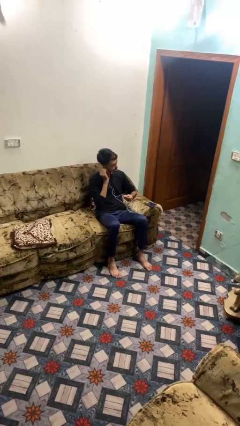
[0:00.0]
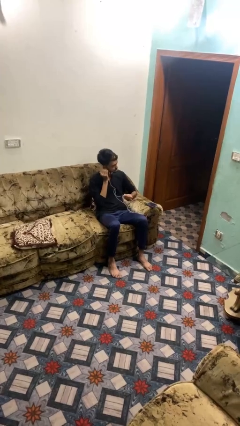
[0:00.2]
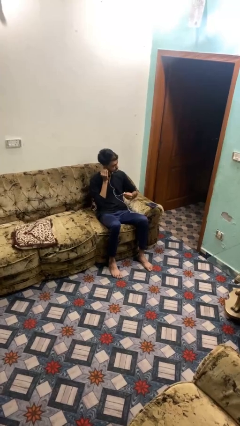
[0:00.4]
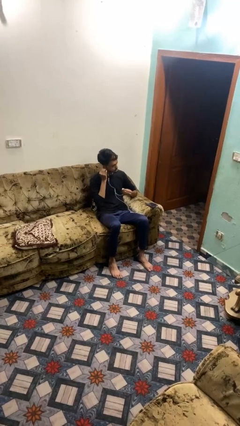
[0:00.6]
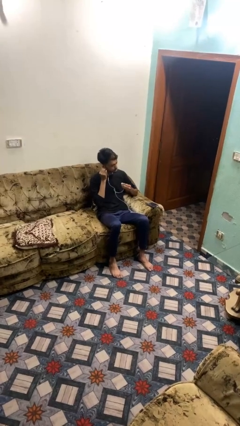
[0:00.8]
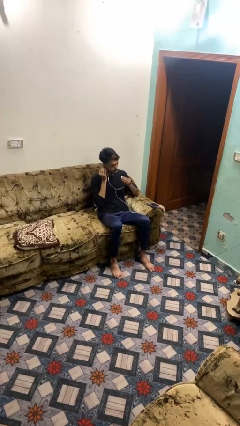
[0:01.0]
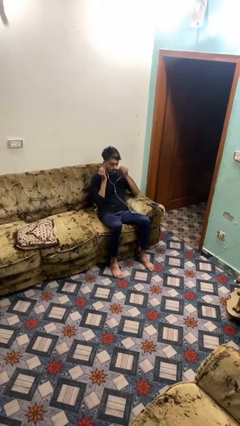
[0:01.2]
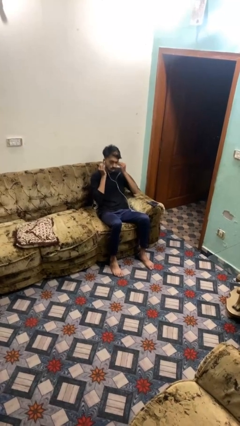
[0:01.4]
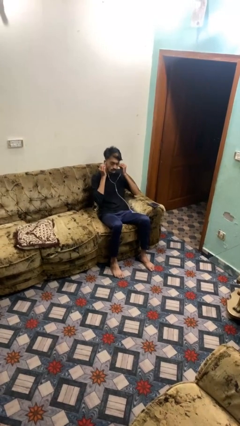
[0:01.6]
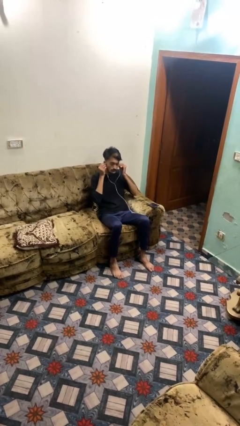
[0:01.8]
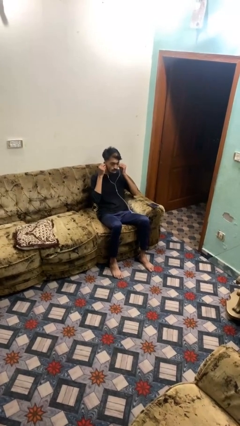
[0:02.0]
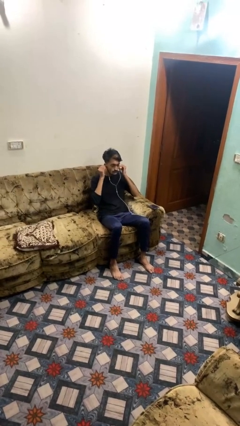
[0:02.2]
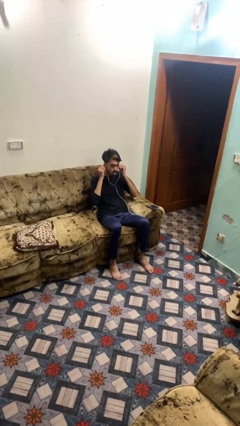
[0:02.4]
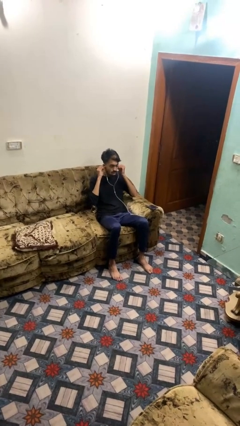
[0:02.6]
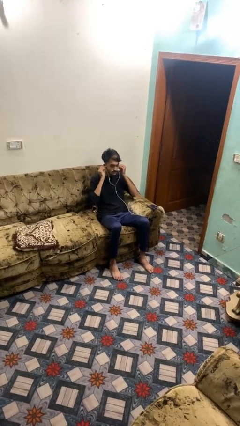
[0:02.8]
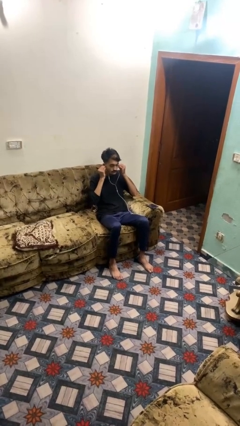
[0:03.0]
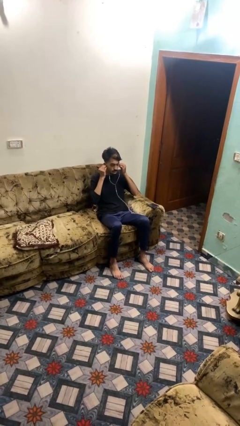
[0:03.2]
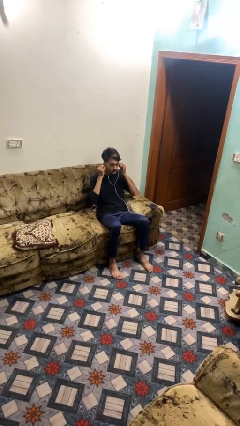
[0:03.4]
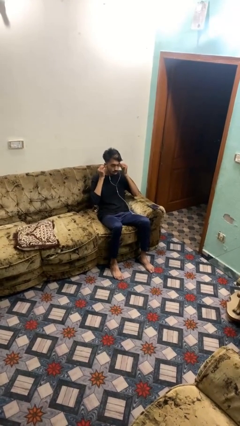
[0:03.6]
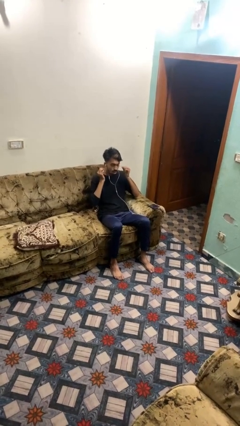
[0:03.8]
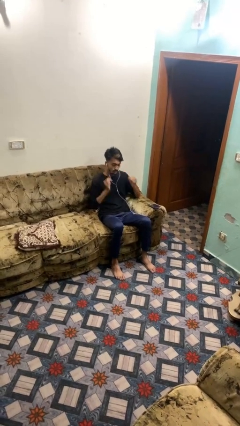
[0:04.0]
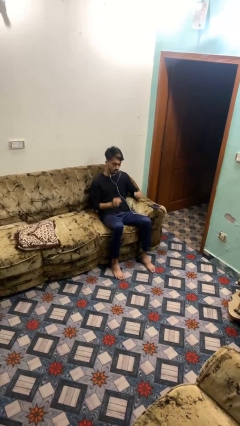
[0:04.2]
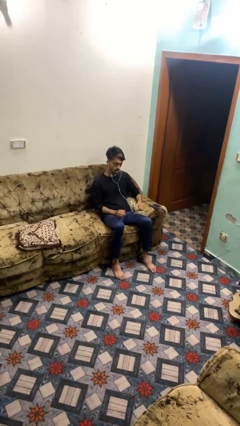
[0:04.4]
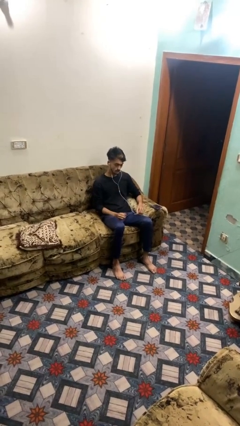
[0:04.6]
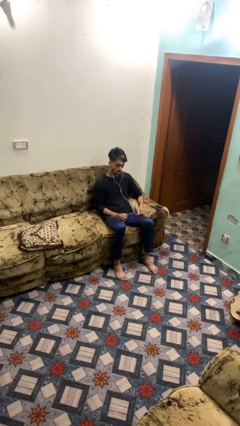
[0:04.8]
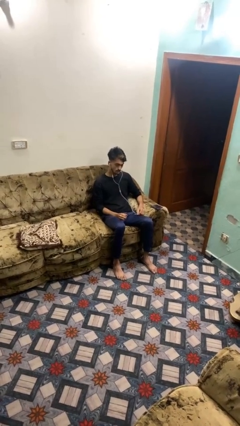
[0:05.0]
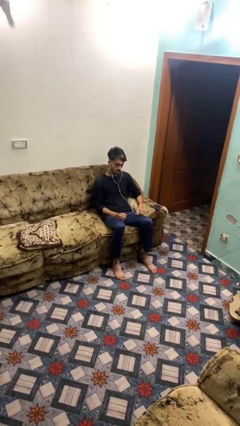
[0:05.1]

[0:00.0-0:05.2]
person puts on headphones

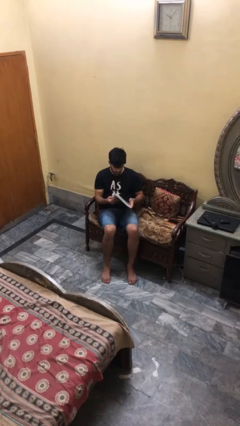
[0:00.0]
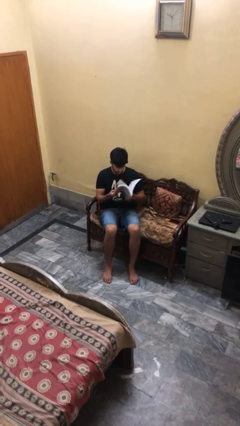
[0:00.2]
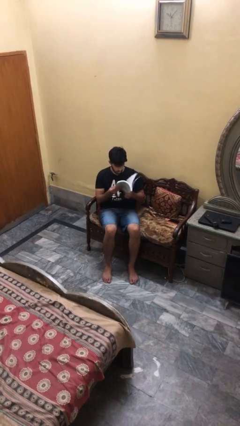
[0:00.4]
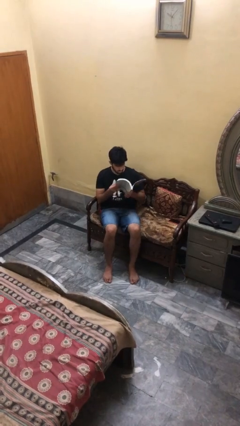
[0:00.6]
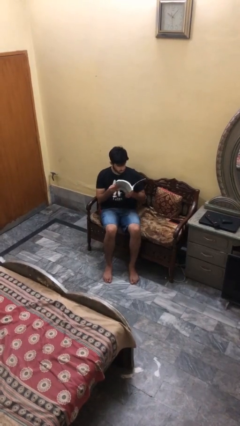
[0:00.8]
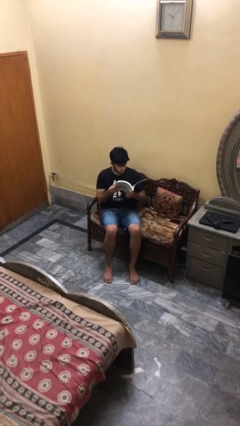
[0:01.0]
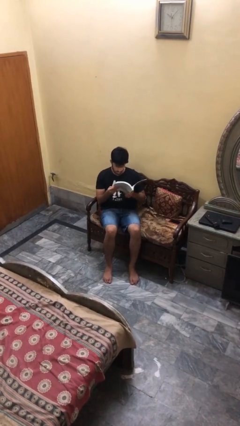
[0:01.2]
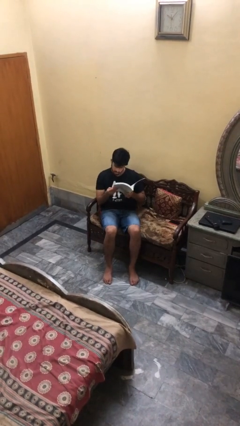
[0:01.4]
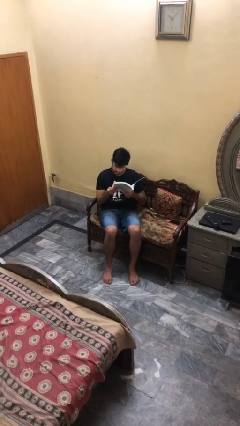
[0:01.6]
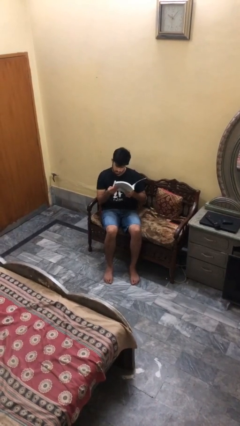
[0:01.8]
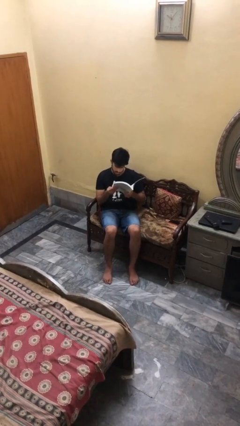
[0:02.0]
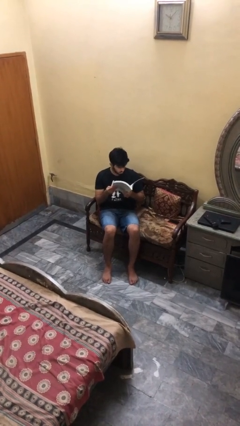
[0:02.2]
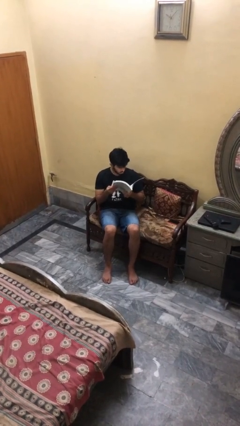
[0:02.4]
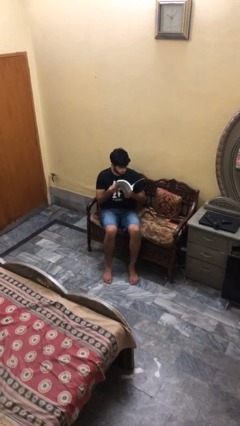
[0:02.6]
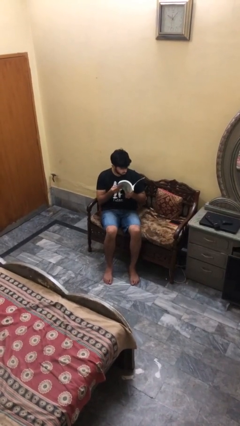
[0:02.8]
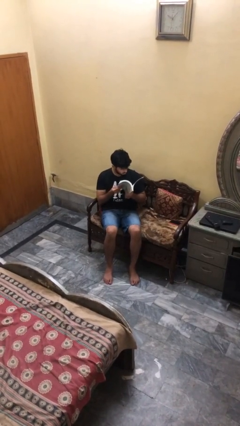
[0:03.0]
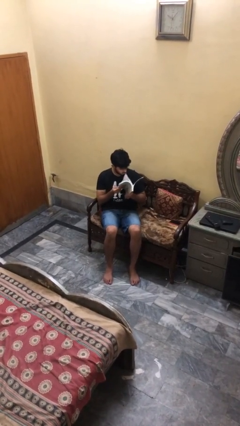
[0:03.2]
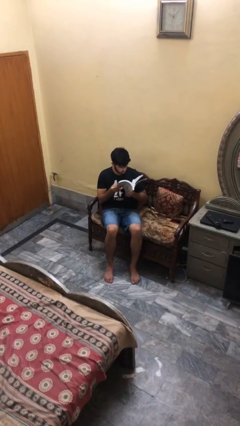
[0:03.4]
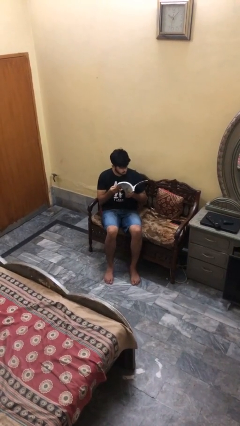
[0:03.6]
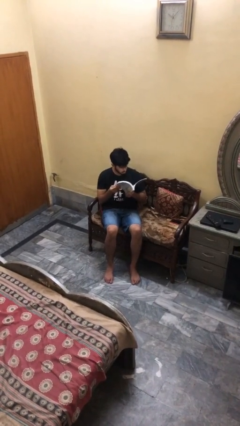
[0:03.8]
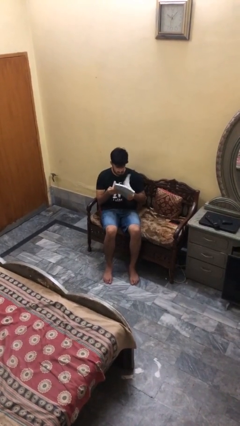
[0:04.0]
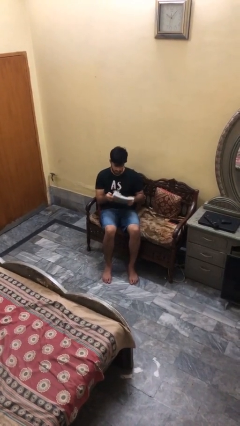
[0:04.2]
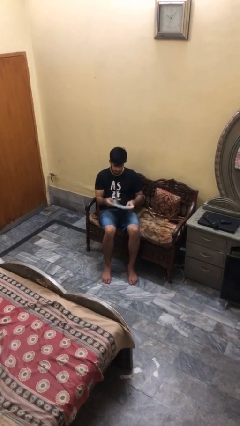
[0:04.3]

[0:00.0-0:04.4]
person reads book

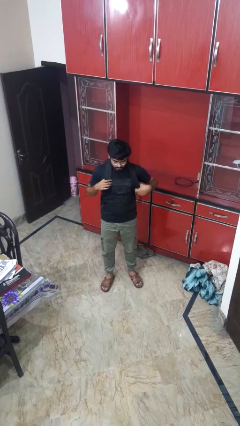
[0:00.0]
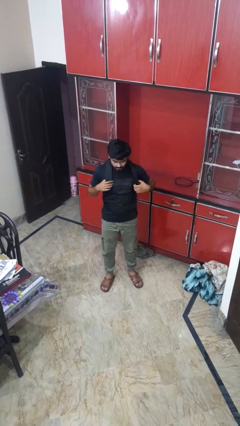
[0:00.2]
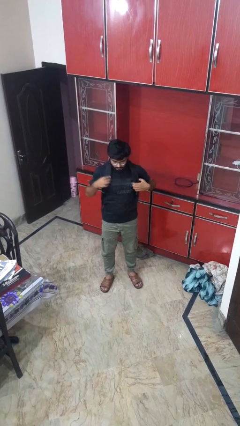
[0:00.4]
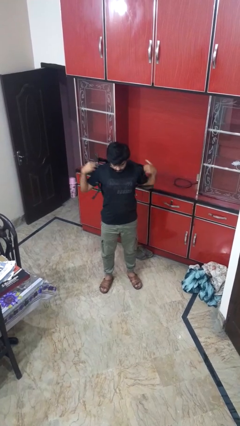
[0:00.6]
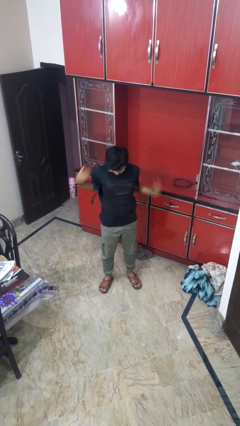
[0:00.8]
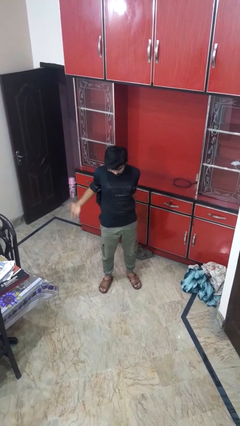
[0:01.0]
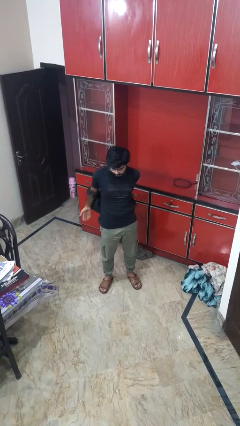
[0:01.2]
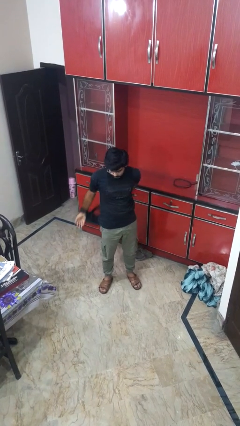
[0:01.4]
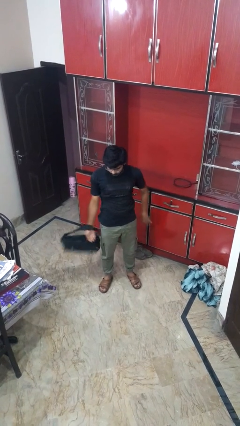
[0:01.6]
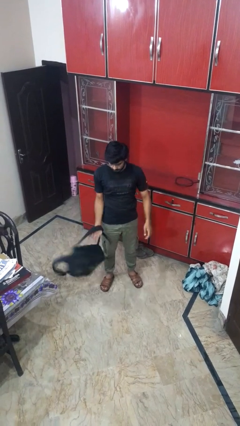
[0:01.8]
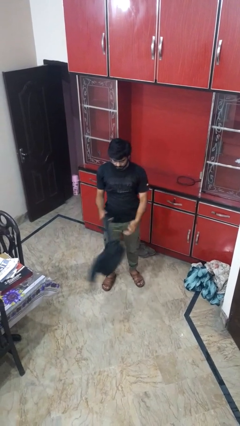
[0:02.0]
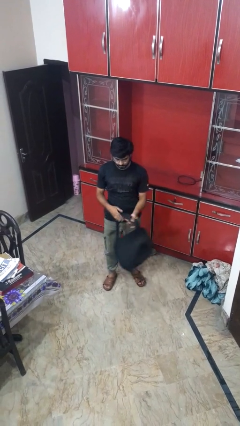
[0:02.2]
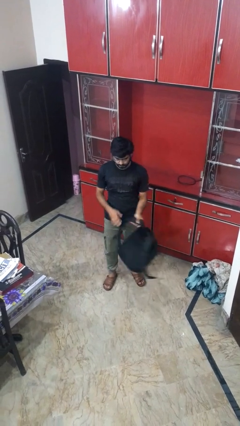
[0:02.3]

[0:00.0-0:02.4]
person takes off backpack

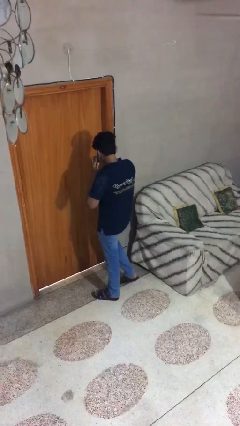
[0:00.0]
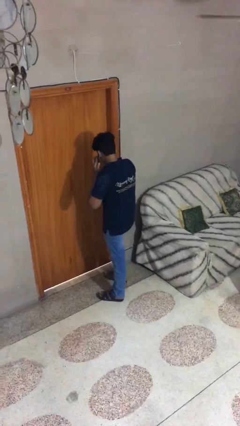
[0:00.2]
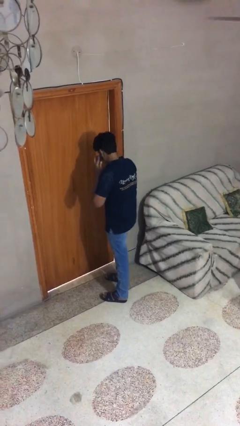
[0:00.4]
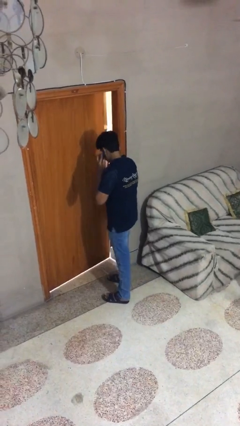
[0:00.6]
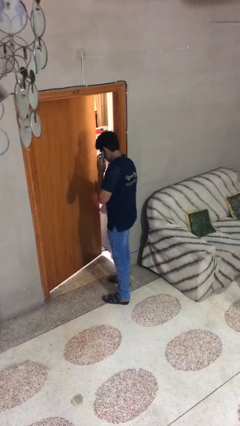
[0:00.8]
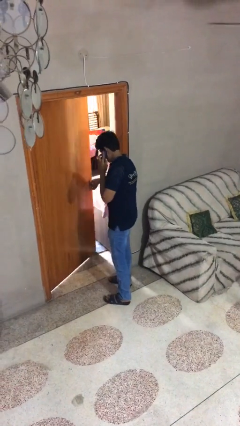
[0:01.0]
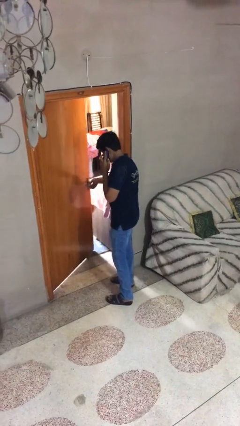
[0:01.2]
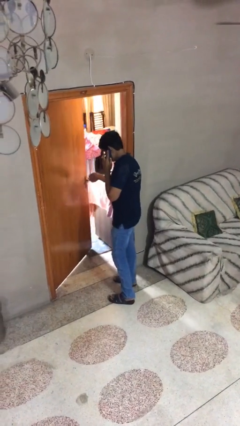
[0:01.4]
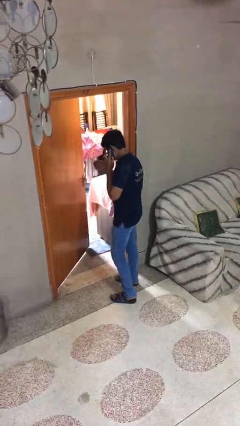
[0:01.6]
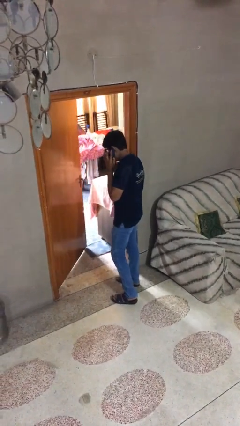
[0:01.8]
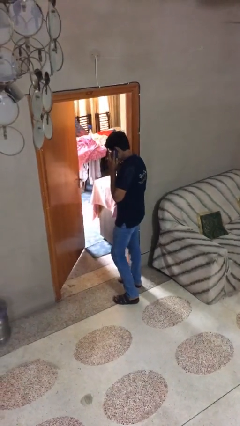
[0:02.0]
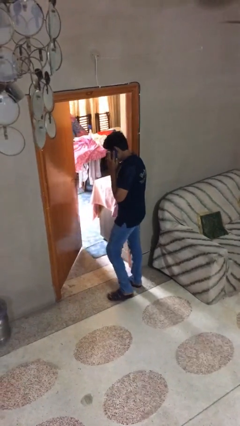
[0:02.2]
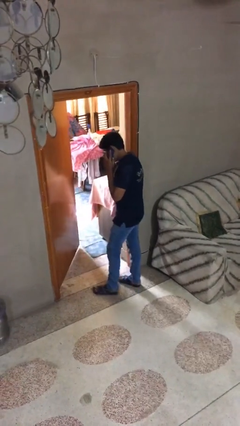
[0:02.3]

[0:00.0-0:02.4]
person opens facility door
